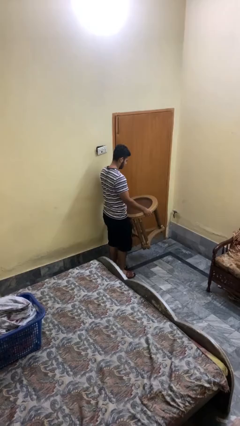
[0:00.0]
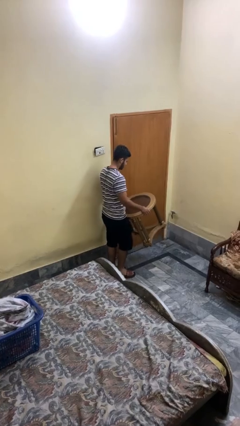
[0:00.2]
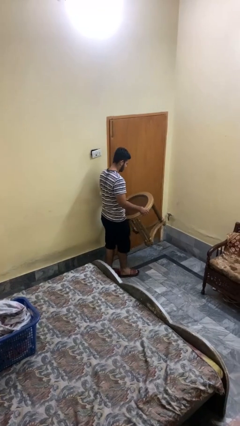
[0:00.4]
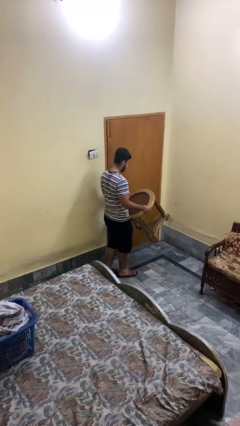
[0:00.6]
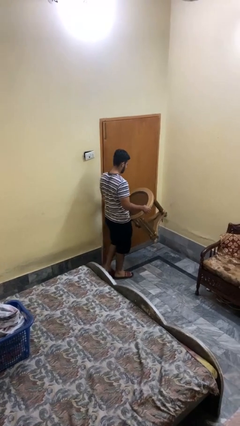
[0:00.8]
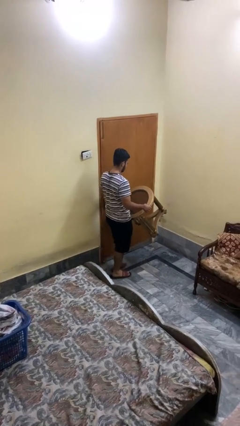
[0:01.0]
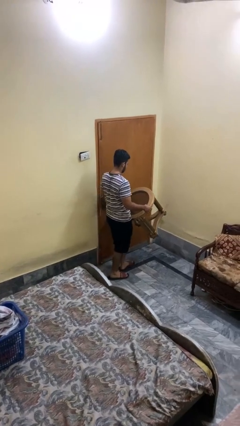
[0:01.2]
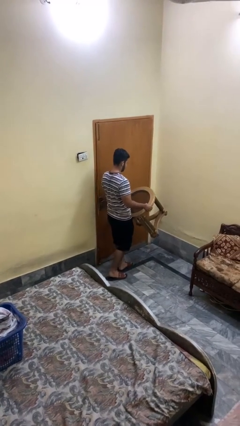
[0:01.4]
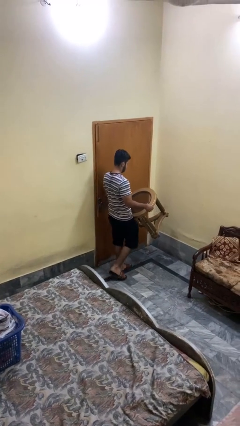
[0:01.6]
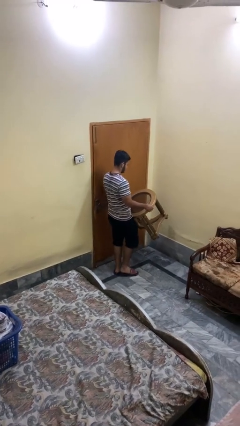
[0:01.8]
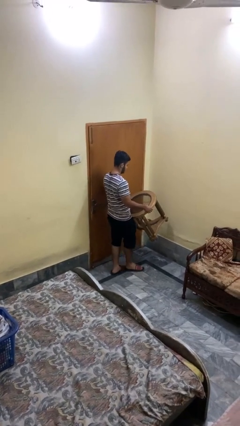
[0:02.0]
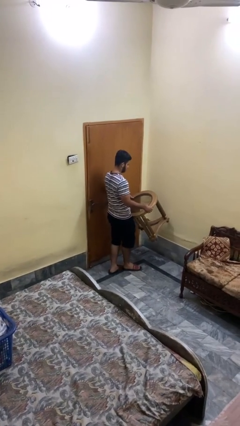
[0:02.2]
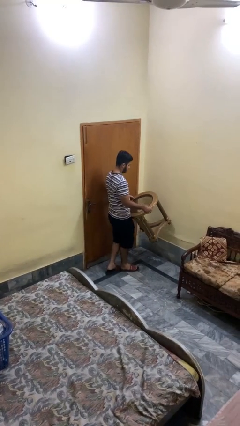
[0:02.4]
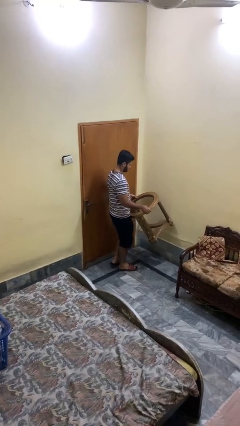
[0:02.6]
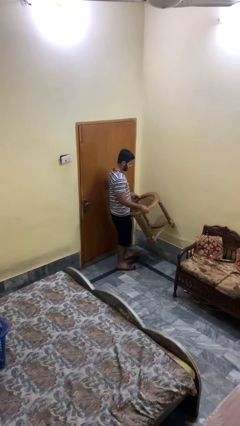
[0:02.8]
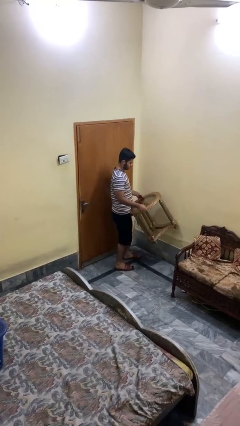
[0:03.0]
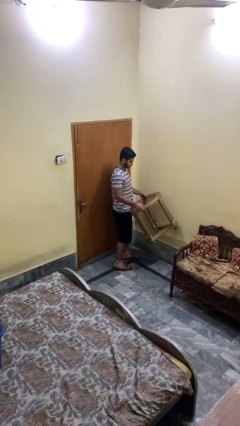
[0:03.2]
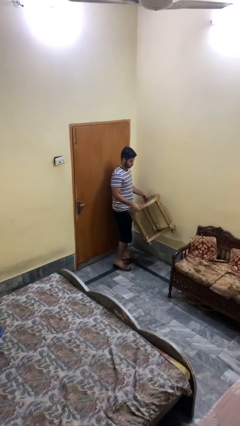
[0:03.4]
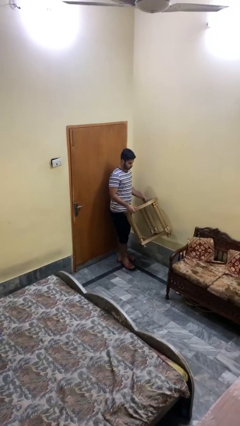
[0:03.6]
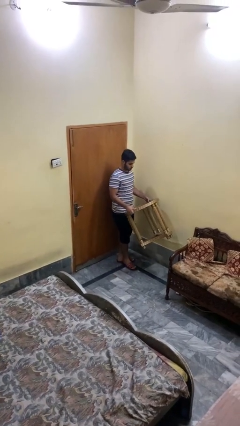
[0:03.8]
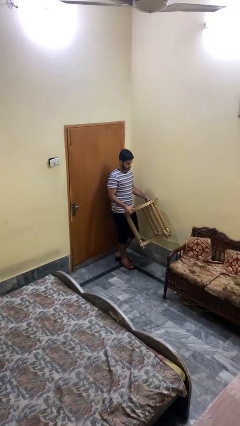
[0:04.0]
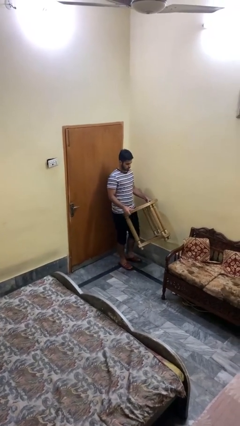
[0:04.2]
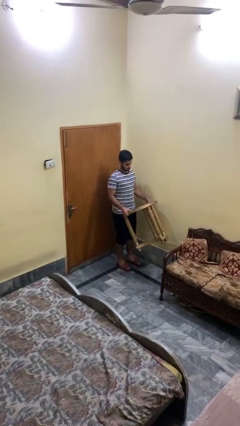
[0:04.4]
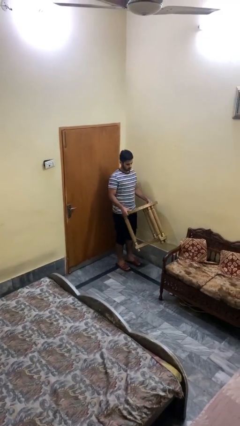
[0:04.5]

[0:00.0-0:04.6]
person carries furniture

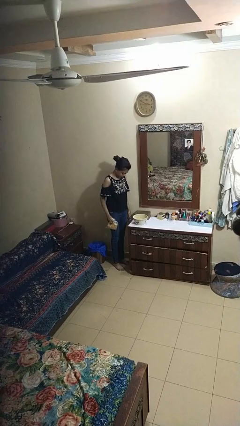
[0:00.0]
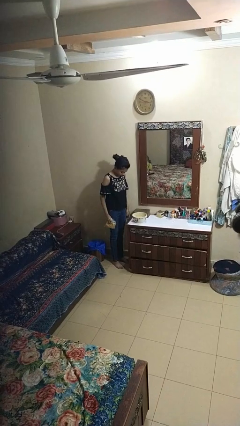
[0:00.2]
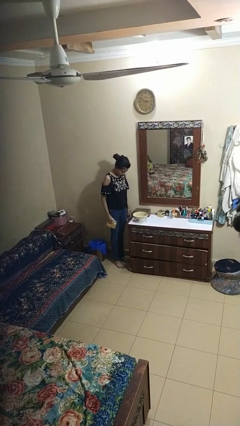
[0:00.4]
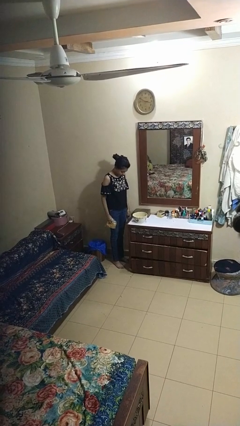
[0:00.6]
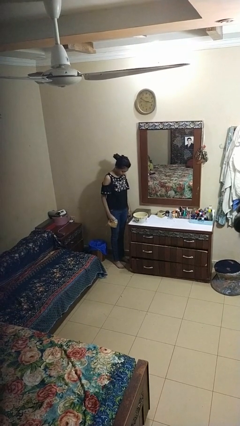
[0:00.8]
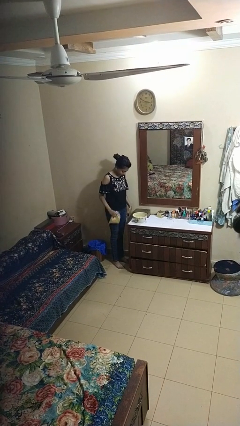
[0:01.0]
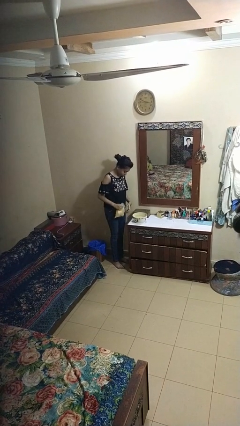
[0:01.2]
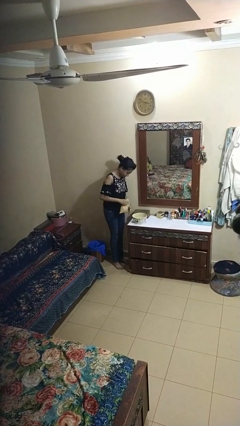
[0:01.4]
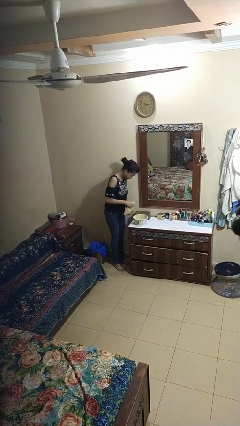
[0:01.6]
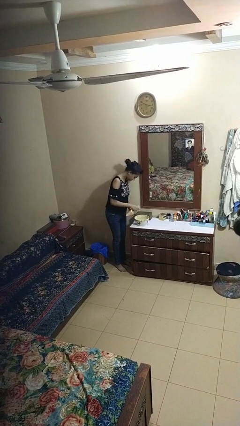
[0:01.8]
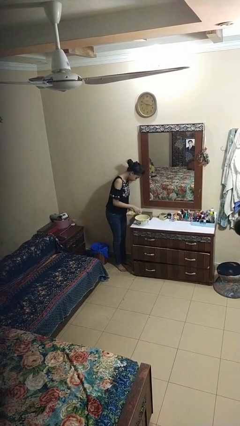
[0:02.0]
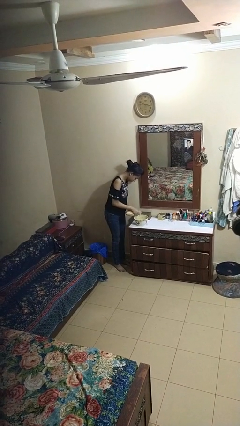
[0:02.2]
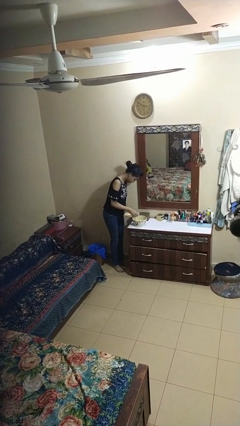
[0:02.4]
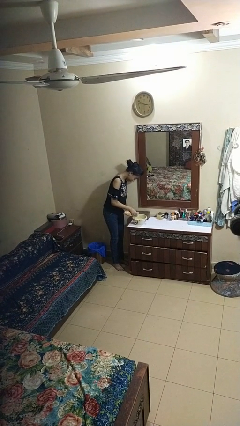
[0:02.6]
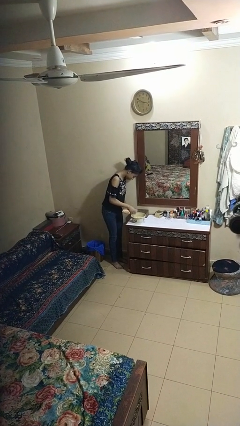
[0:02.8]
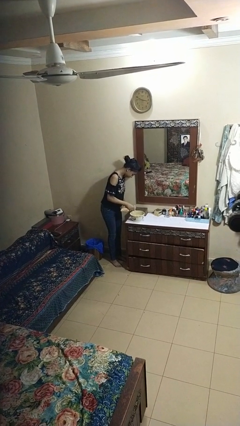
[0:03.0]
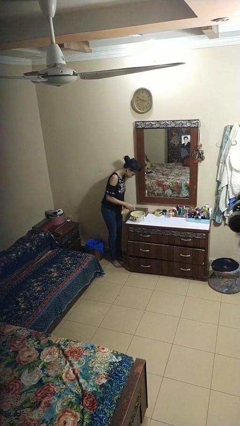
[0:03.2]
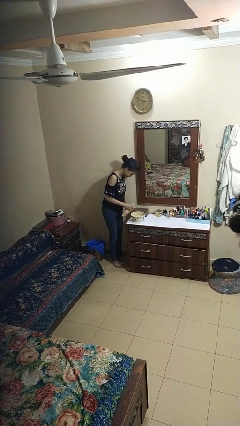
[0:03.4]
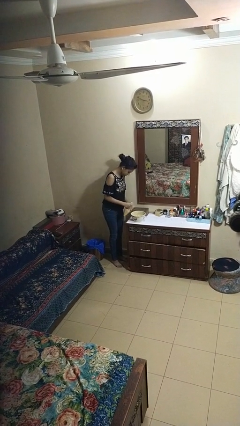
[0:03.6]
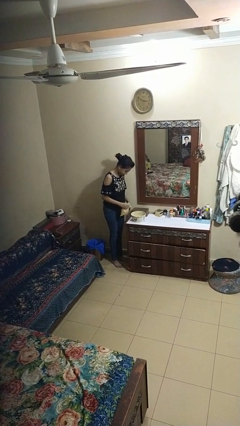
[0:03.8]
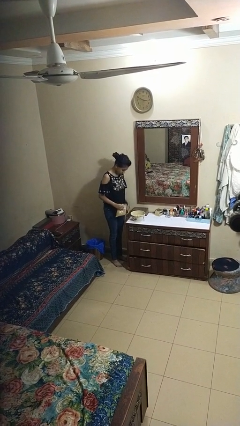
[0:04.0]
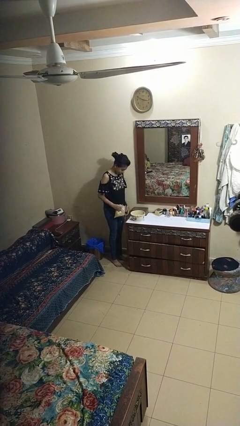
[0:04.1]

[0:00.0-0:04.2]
person pours into bowl

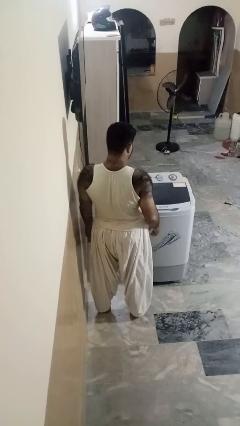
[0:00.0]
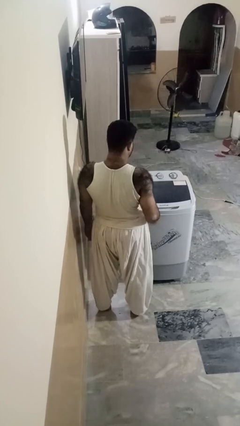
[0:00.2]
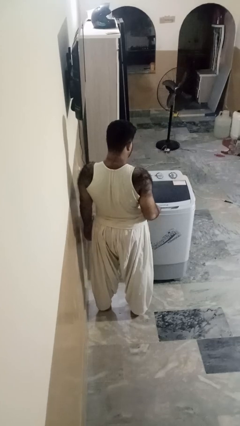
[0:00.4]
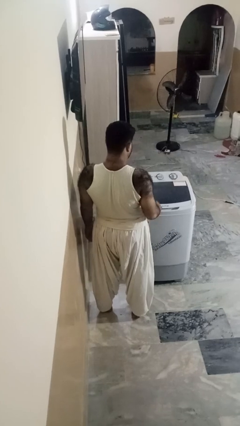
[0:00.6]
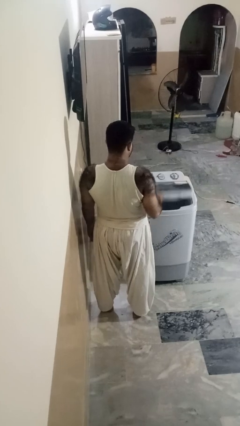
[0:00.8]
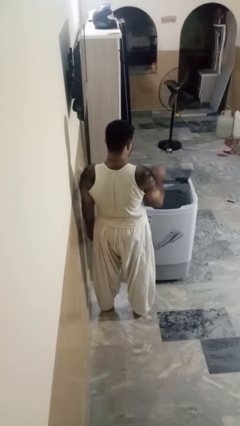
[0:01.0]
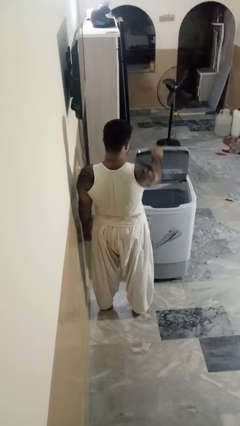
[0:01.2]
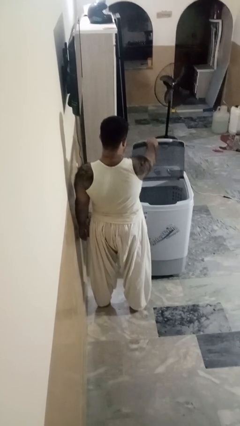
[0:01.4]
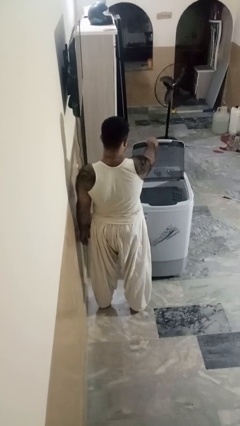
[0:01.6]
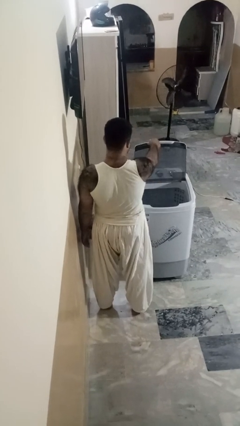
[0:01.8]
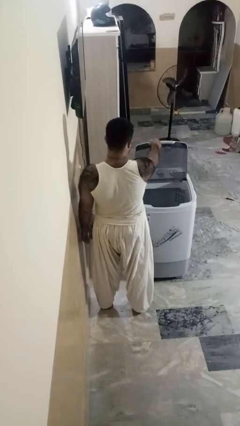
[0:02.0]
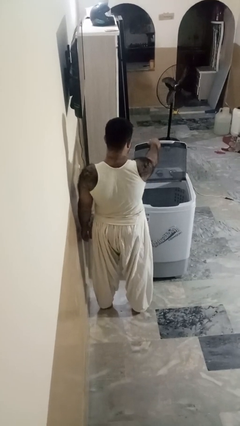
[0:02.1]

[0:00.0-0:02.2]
person opens clothes washer

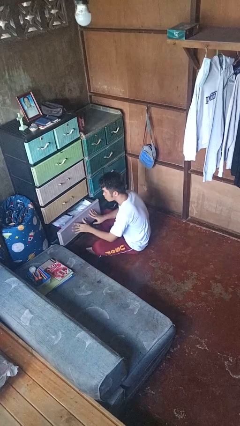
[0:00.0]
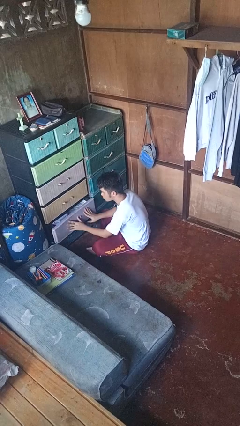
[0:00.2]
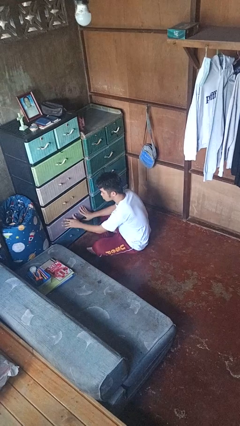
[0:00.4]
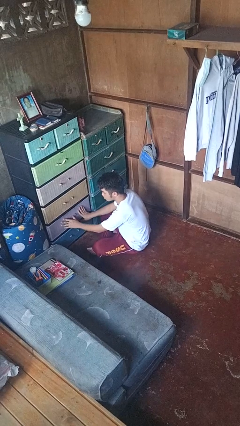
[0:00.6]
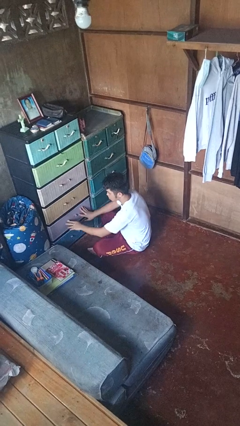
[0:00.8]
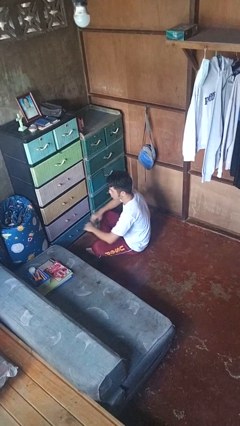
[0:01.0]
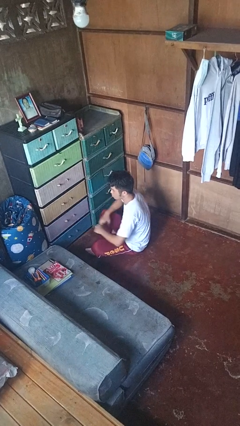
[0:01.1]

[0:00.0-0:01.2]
person closes dresser drawer

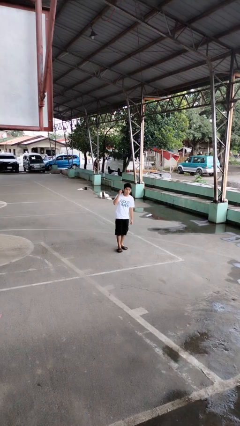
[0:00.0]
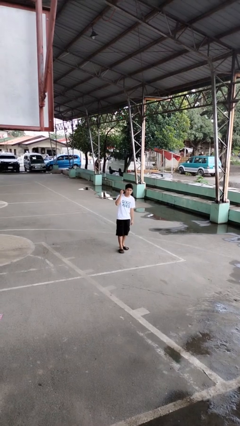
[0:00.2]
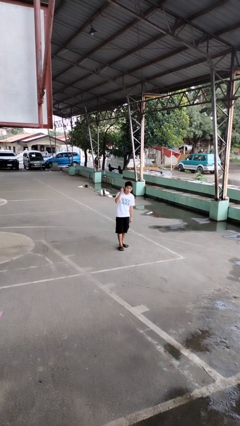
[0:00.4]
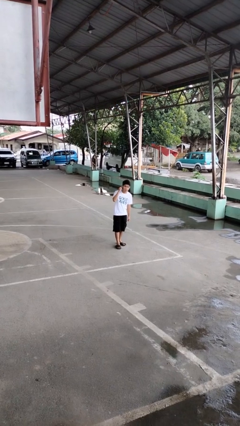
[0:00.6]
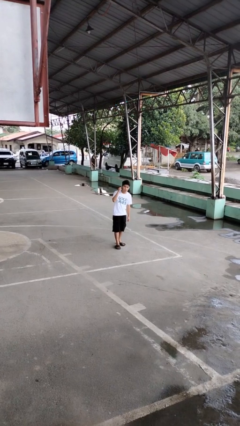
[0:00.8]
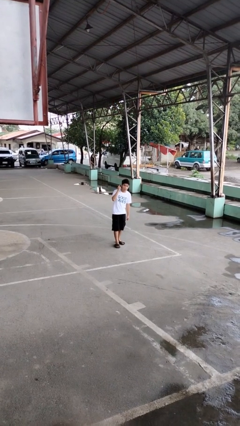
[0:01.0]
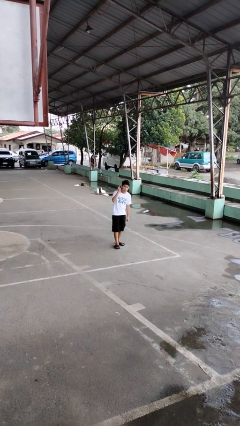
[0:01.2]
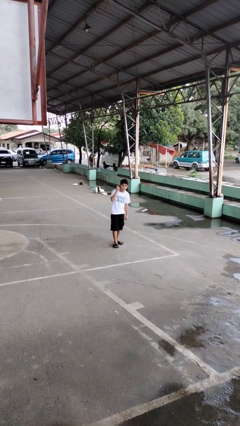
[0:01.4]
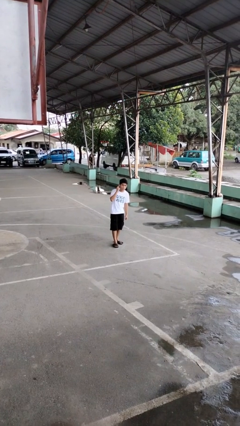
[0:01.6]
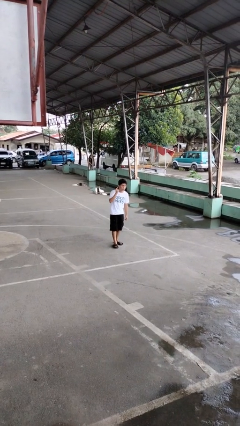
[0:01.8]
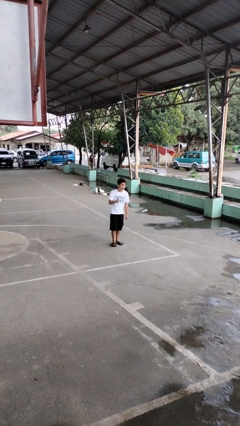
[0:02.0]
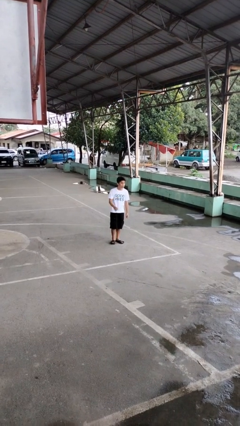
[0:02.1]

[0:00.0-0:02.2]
person gestures listen closely

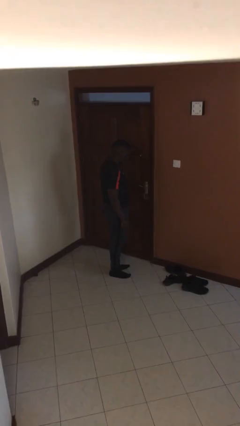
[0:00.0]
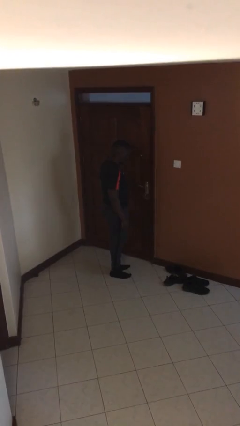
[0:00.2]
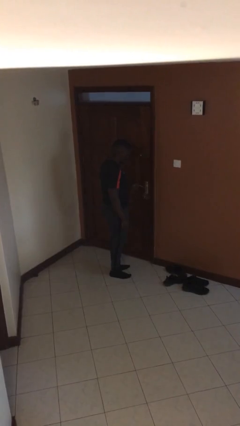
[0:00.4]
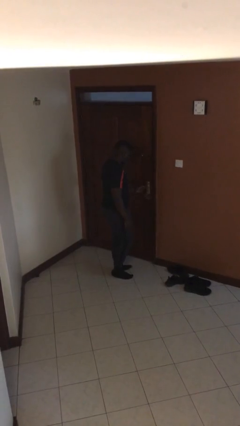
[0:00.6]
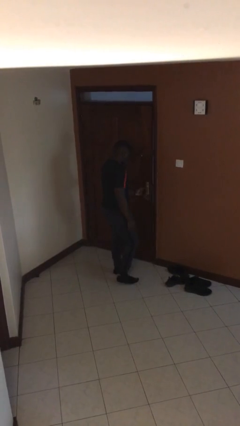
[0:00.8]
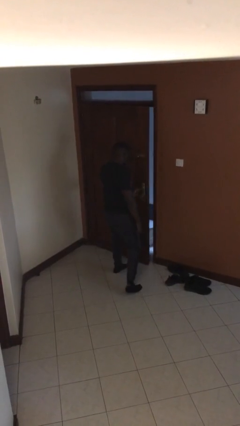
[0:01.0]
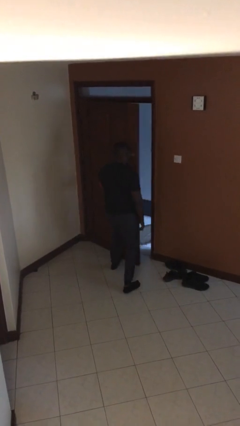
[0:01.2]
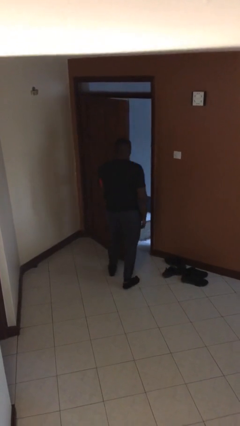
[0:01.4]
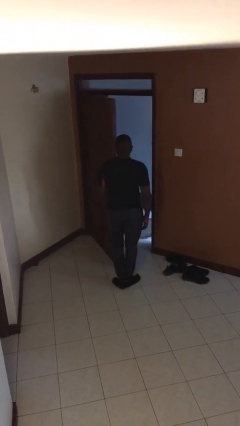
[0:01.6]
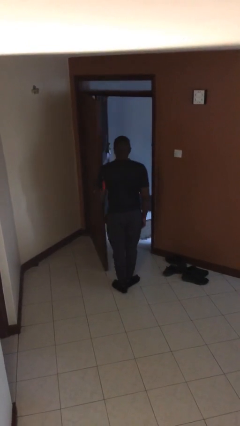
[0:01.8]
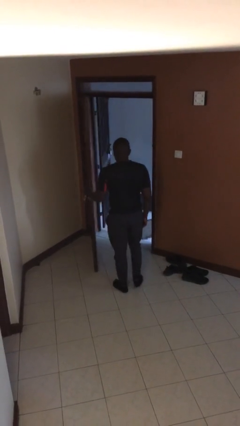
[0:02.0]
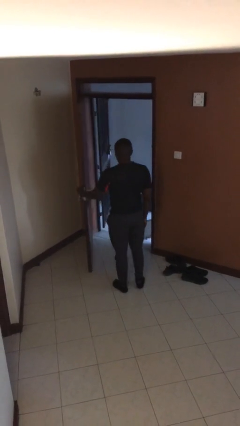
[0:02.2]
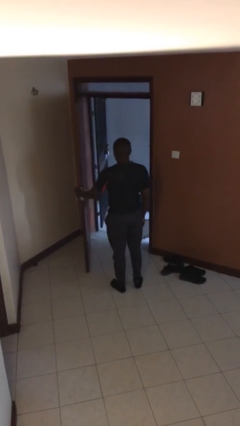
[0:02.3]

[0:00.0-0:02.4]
person opens facility door

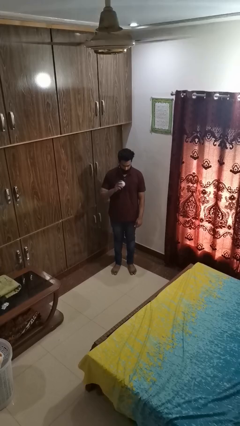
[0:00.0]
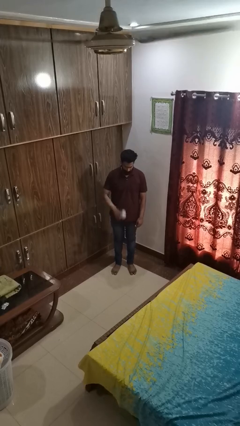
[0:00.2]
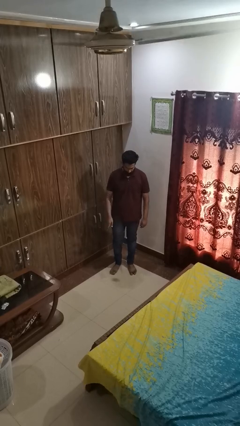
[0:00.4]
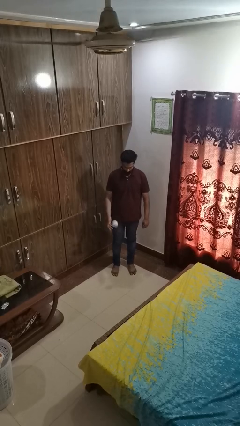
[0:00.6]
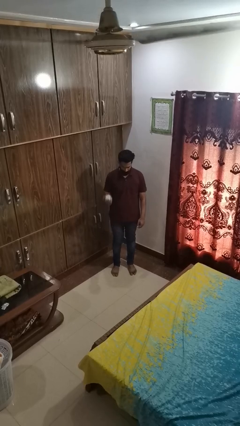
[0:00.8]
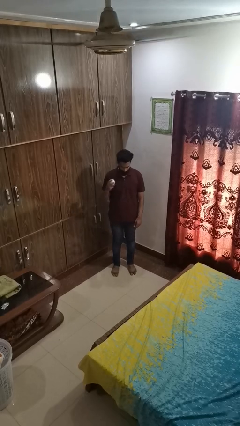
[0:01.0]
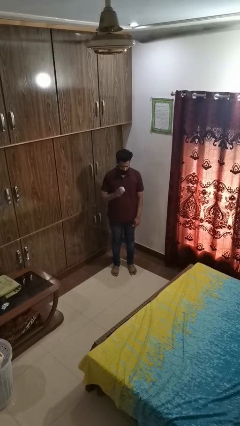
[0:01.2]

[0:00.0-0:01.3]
person bounces ball on floor
